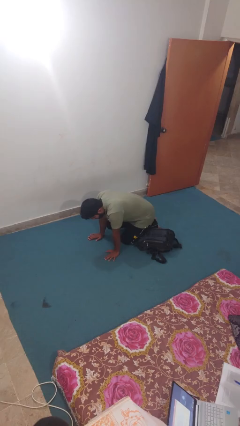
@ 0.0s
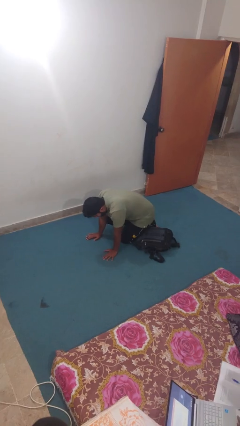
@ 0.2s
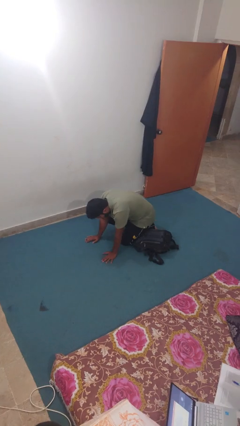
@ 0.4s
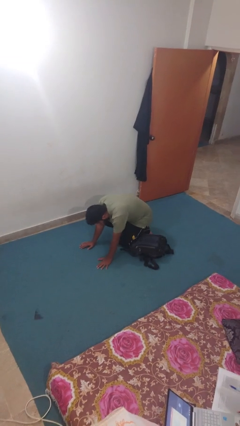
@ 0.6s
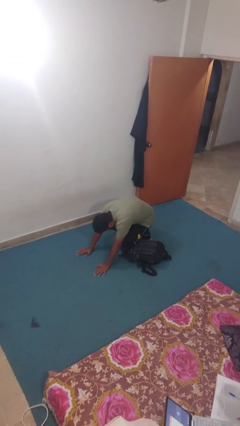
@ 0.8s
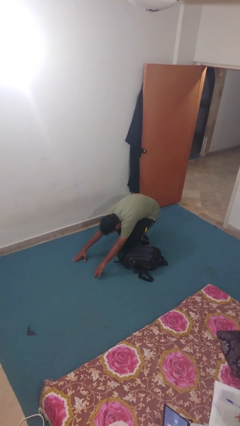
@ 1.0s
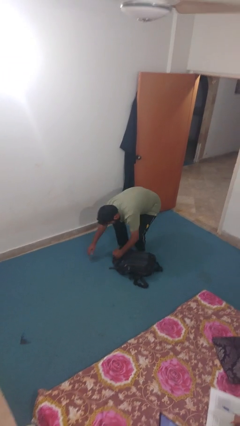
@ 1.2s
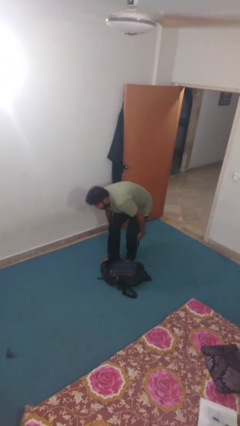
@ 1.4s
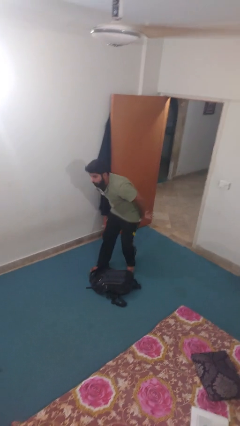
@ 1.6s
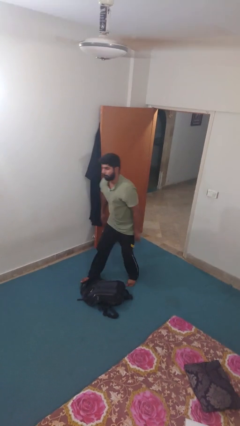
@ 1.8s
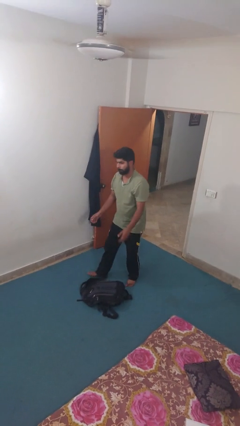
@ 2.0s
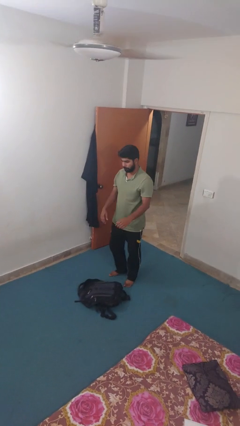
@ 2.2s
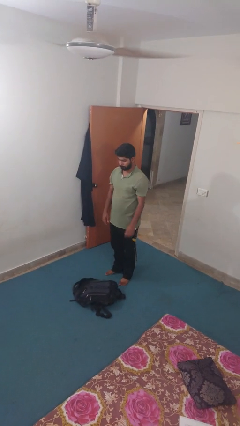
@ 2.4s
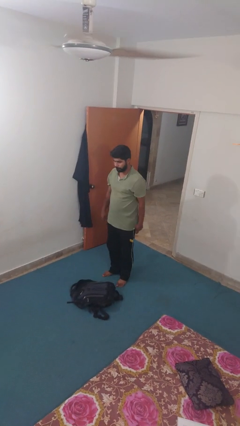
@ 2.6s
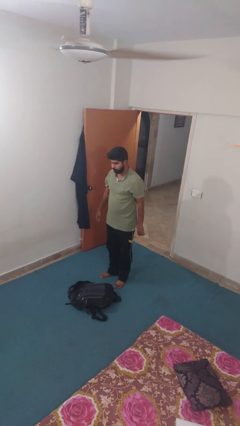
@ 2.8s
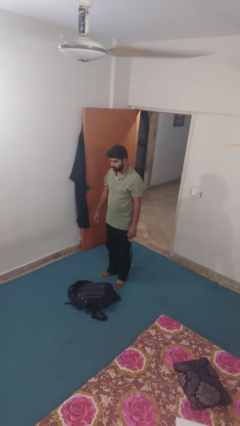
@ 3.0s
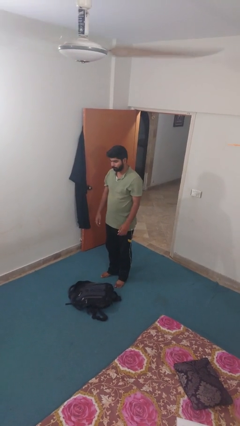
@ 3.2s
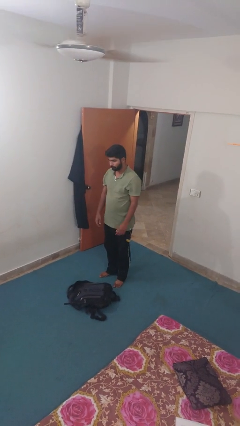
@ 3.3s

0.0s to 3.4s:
person stands up from floor

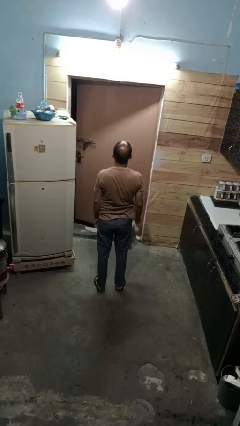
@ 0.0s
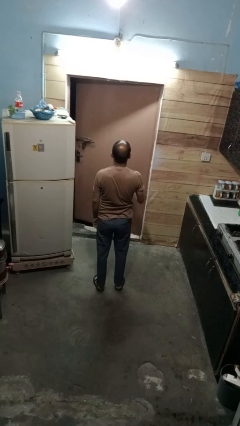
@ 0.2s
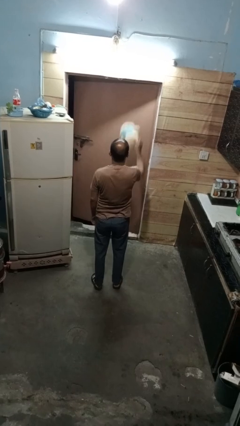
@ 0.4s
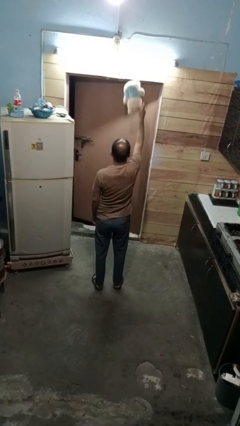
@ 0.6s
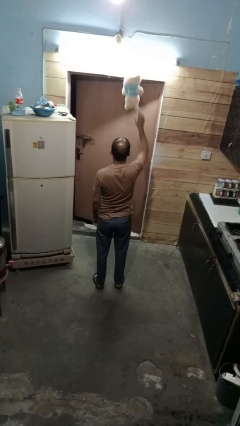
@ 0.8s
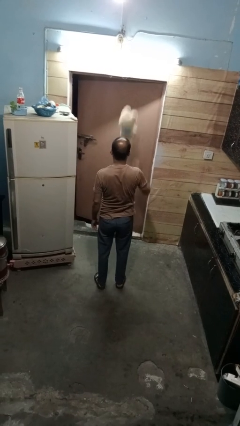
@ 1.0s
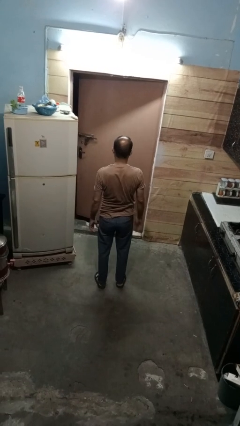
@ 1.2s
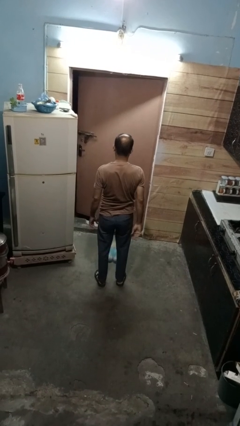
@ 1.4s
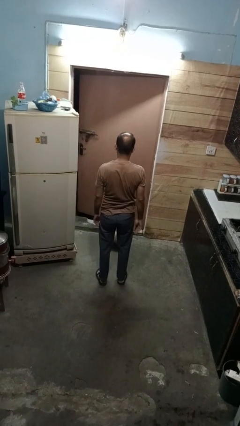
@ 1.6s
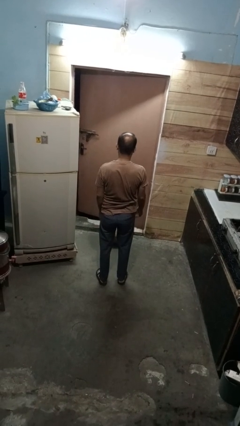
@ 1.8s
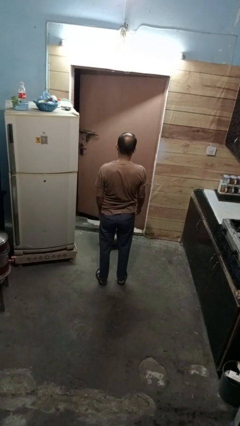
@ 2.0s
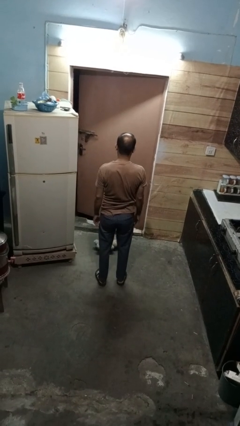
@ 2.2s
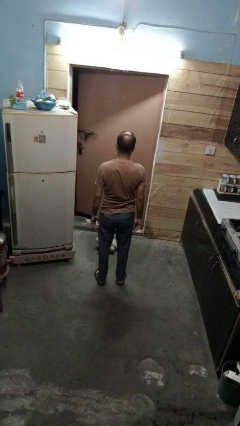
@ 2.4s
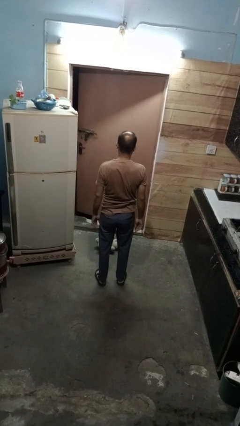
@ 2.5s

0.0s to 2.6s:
person throws object into air

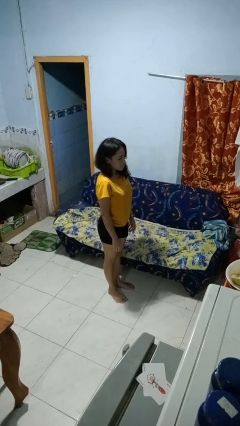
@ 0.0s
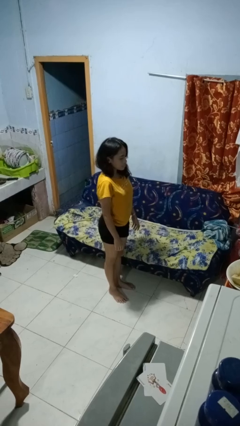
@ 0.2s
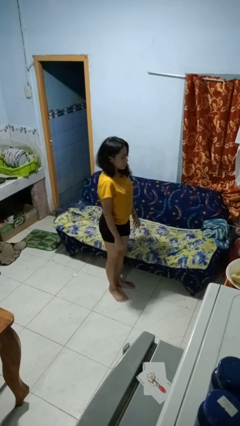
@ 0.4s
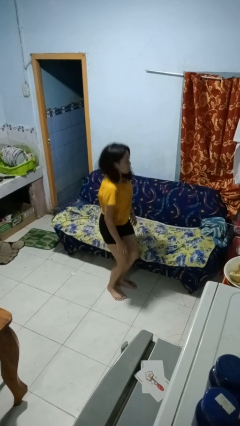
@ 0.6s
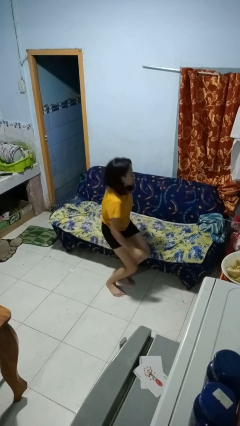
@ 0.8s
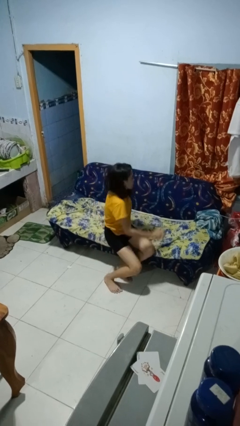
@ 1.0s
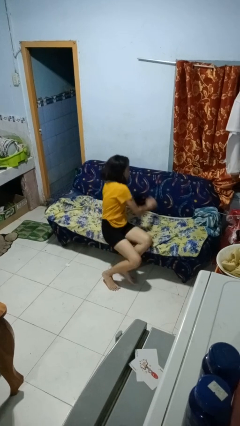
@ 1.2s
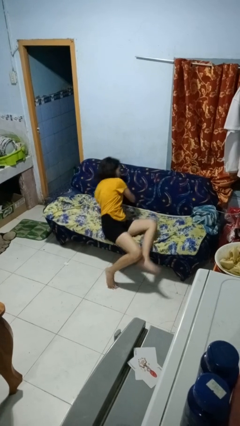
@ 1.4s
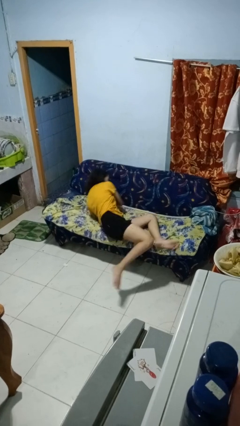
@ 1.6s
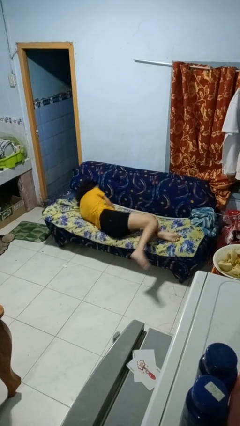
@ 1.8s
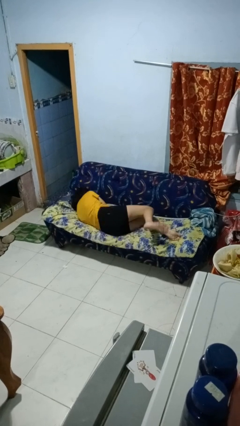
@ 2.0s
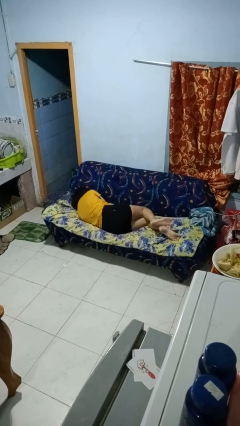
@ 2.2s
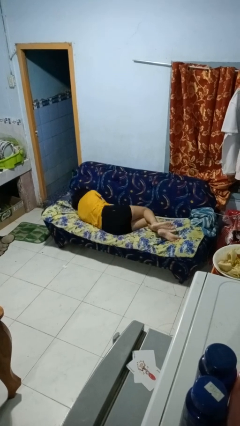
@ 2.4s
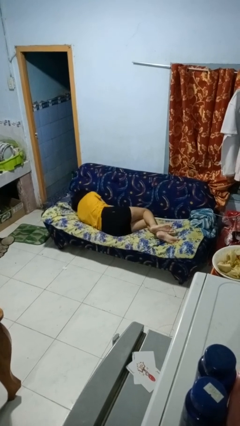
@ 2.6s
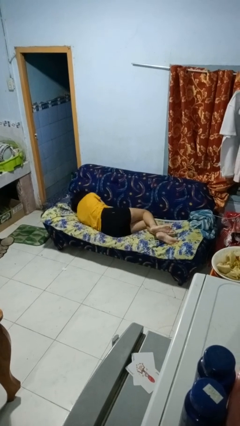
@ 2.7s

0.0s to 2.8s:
person lies down on couch

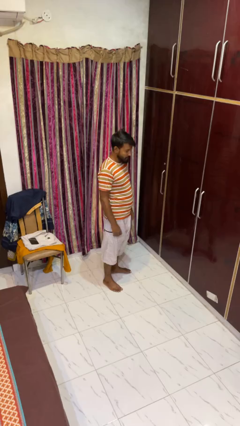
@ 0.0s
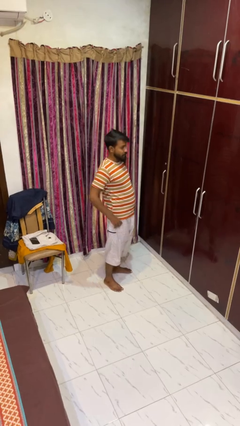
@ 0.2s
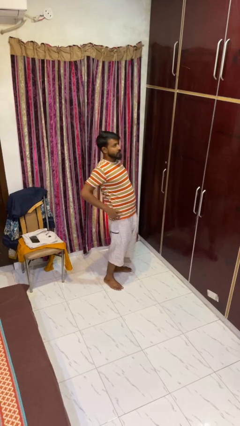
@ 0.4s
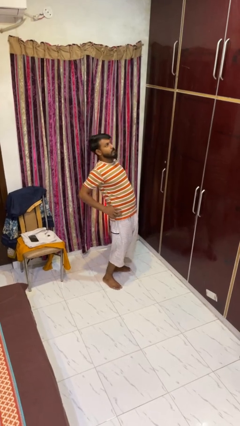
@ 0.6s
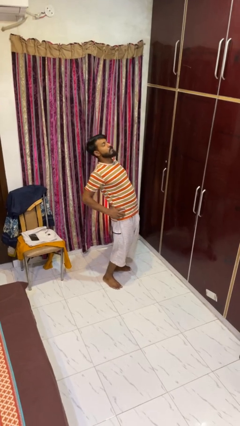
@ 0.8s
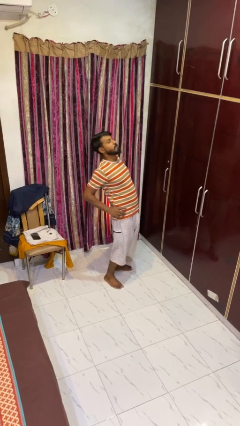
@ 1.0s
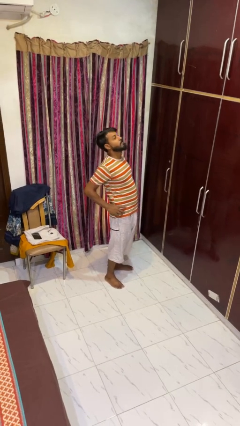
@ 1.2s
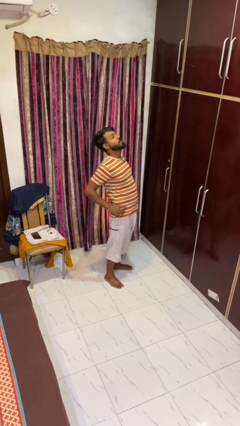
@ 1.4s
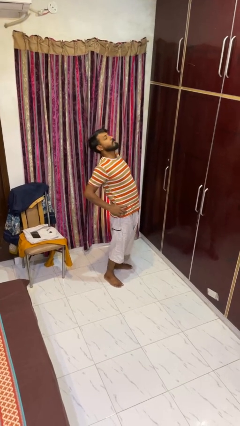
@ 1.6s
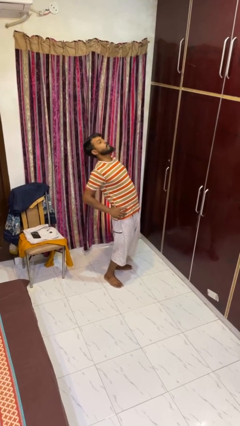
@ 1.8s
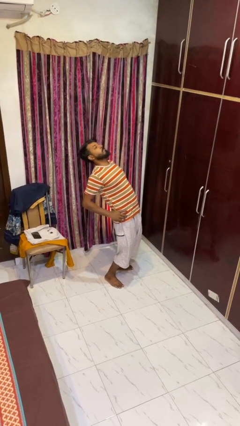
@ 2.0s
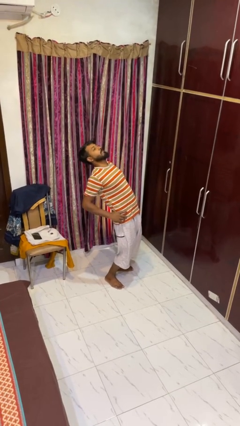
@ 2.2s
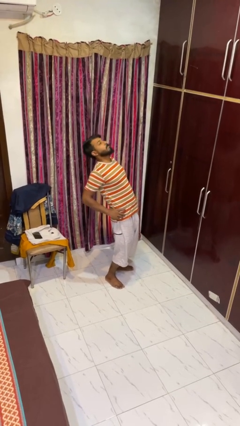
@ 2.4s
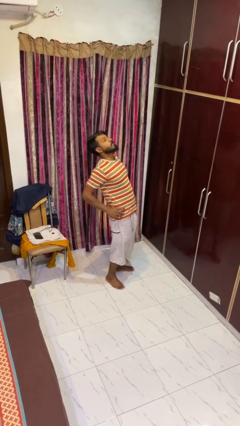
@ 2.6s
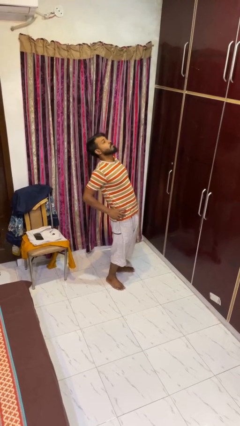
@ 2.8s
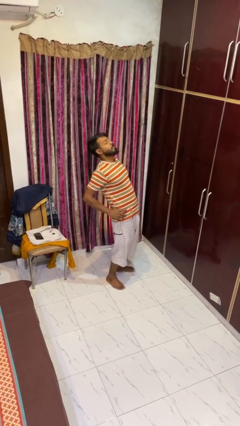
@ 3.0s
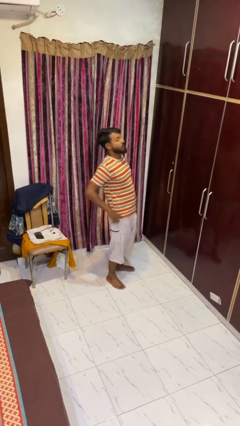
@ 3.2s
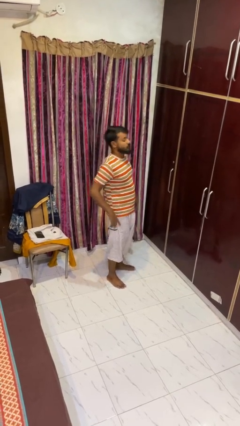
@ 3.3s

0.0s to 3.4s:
person stretches back

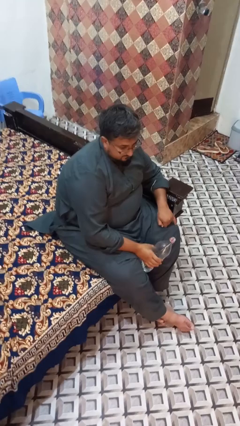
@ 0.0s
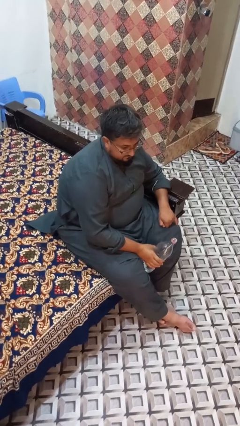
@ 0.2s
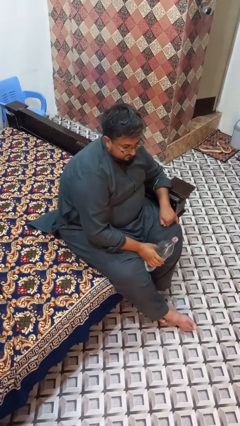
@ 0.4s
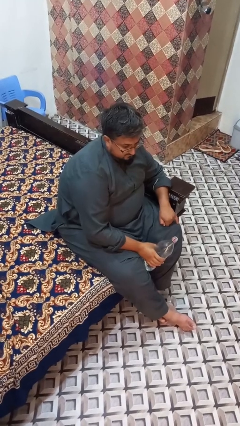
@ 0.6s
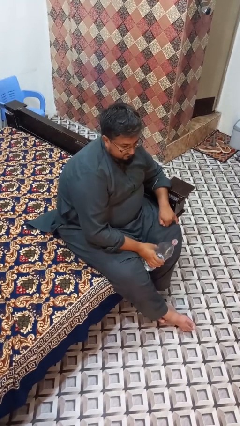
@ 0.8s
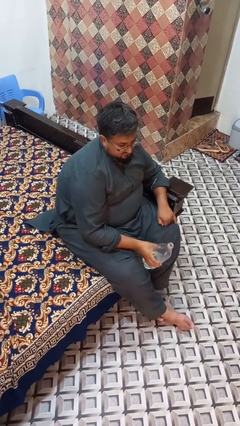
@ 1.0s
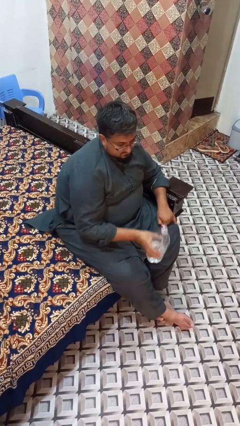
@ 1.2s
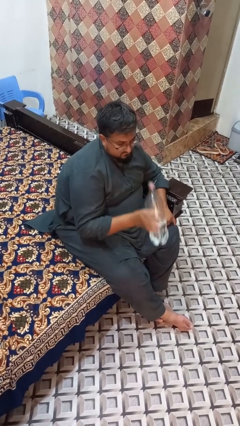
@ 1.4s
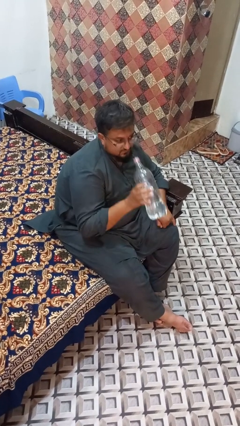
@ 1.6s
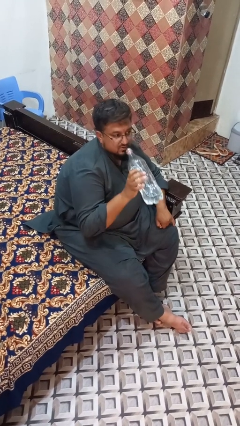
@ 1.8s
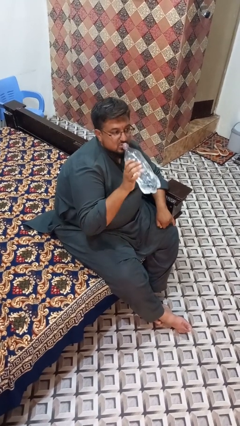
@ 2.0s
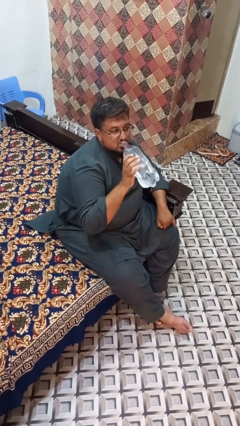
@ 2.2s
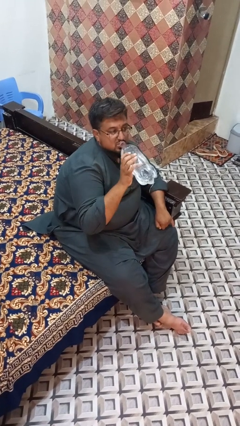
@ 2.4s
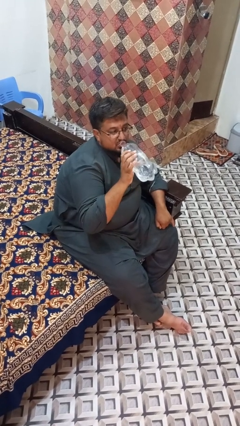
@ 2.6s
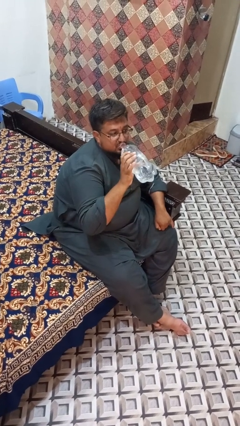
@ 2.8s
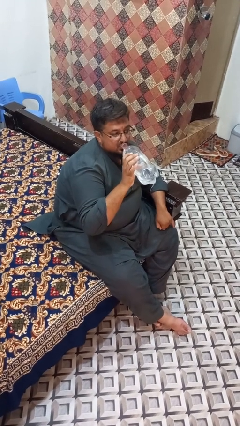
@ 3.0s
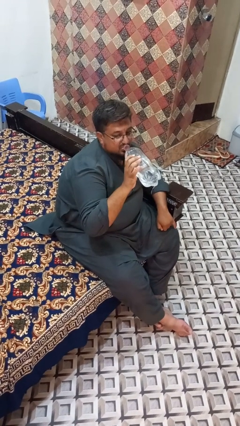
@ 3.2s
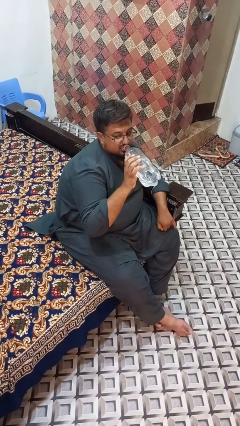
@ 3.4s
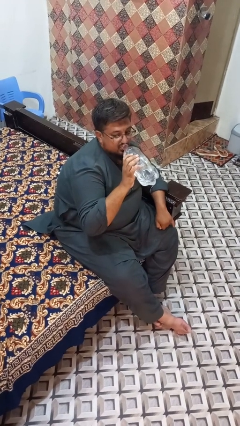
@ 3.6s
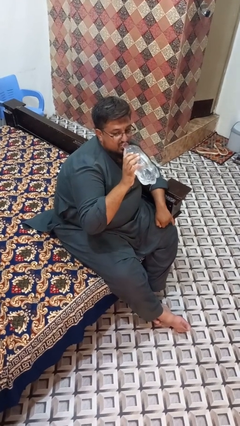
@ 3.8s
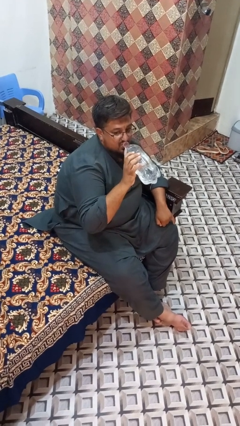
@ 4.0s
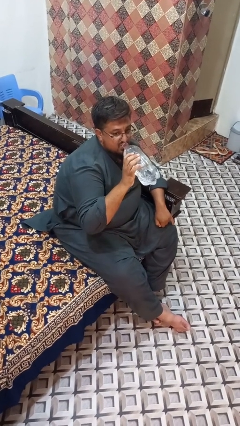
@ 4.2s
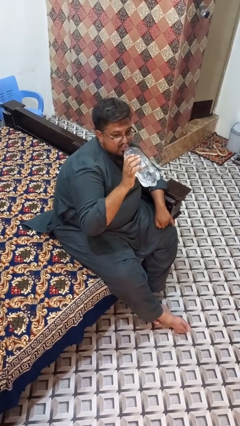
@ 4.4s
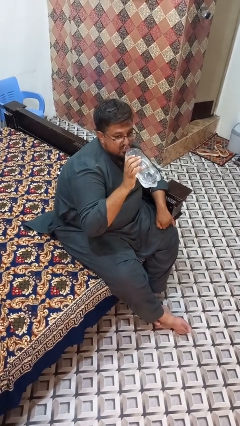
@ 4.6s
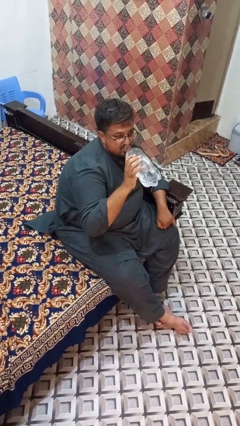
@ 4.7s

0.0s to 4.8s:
person drinks from bottle

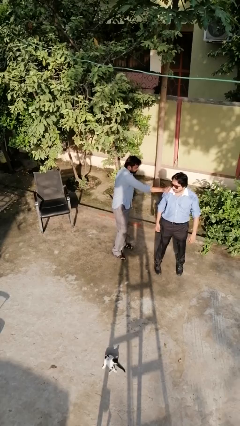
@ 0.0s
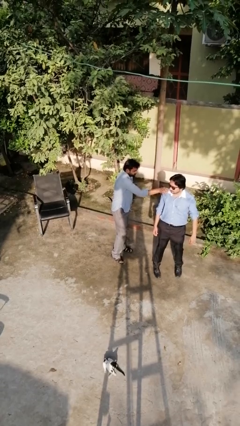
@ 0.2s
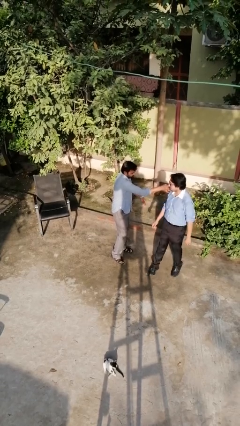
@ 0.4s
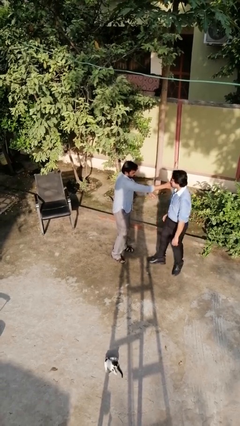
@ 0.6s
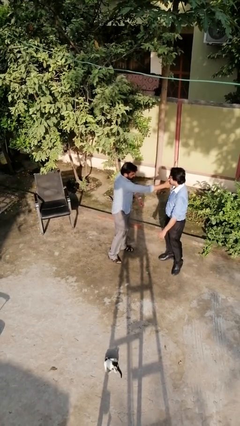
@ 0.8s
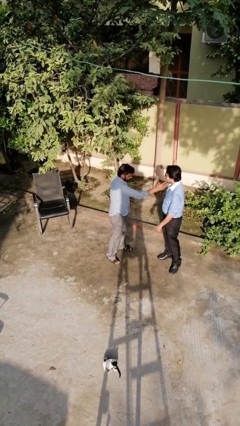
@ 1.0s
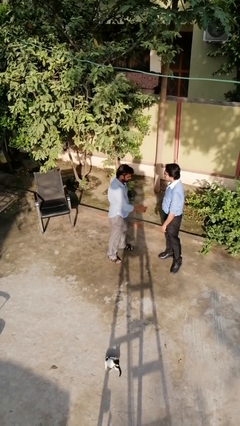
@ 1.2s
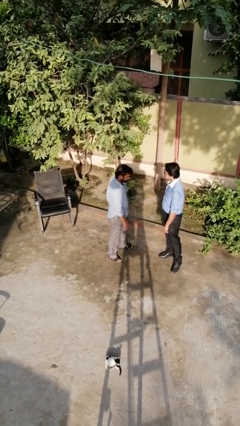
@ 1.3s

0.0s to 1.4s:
person spins person around
